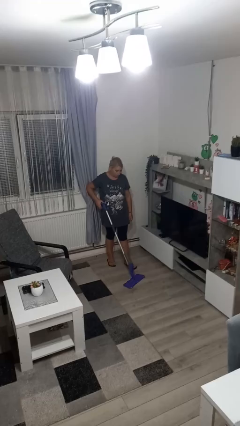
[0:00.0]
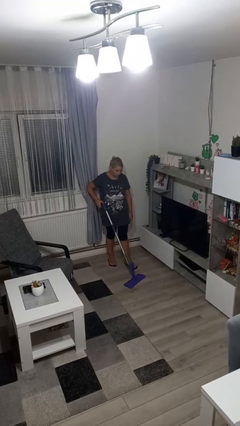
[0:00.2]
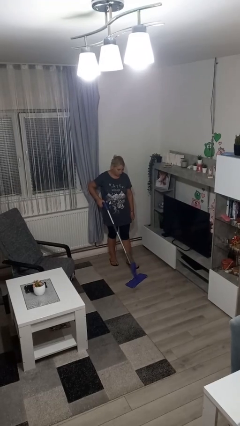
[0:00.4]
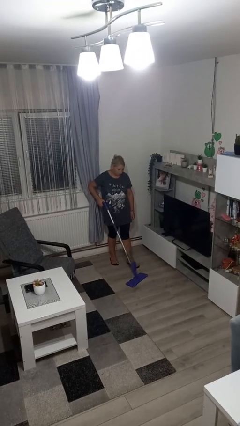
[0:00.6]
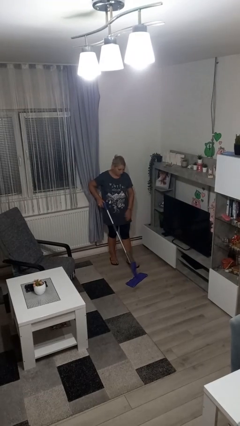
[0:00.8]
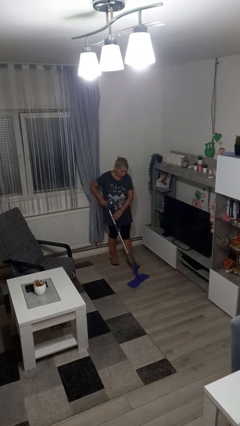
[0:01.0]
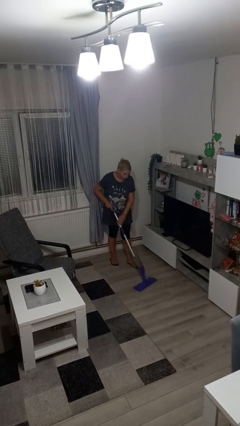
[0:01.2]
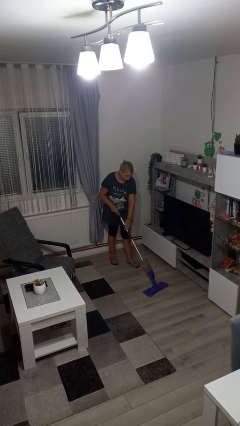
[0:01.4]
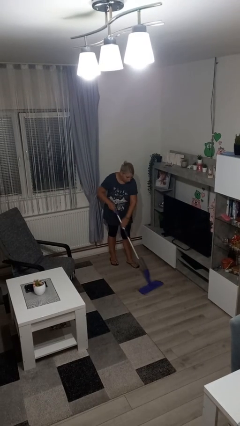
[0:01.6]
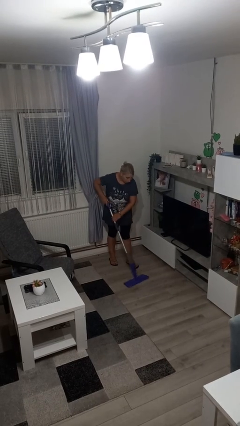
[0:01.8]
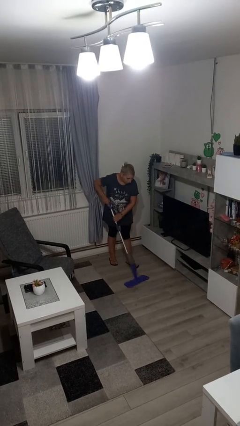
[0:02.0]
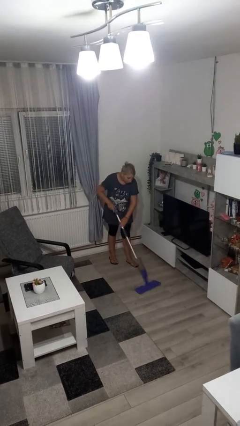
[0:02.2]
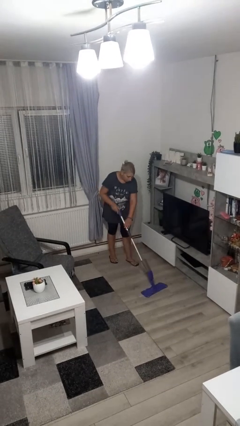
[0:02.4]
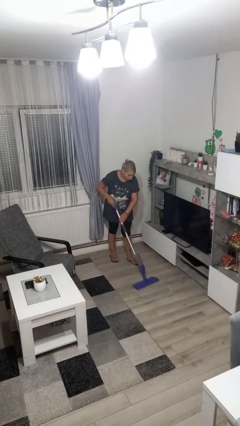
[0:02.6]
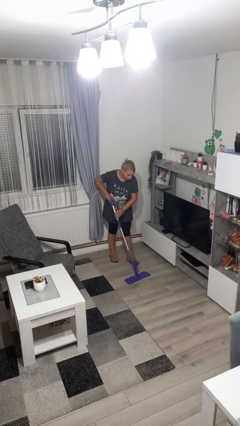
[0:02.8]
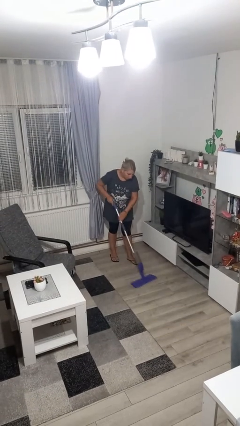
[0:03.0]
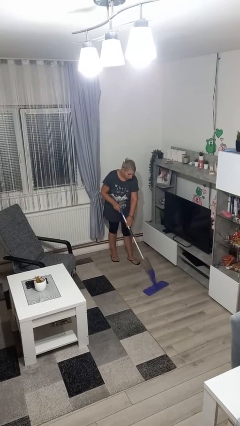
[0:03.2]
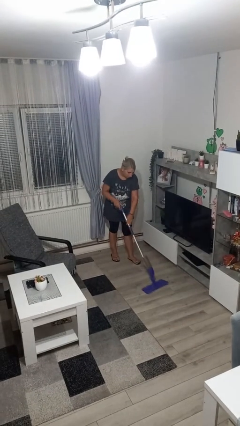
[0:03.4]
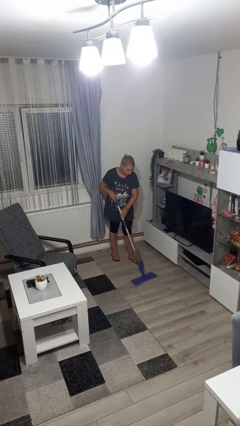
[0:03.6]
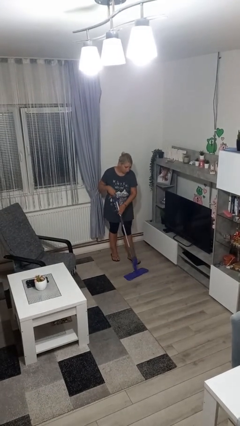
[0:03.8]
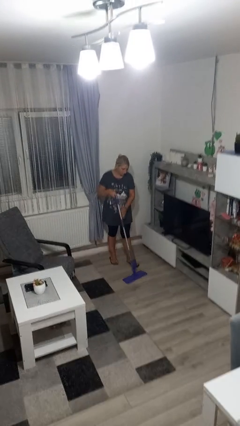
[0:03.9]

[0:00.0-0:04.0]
person mops

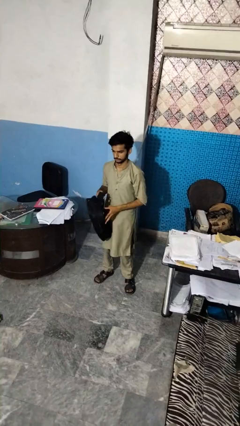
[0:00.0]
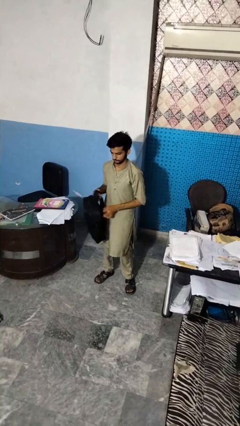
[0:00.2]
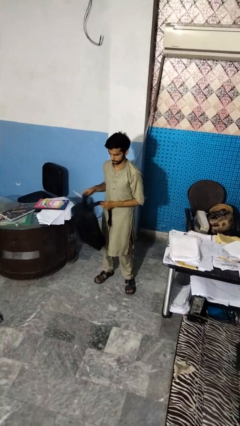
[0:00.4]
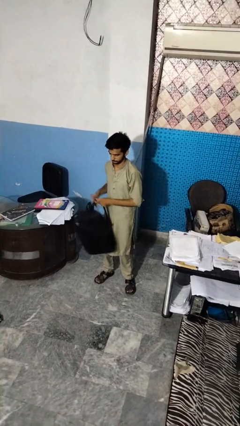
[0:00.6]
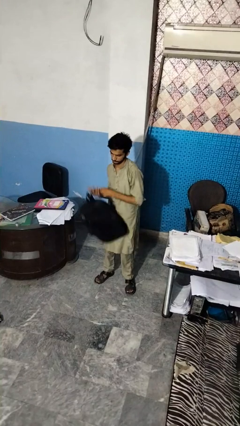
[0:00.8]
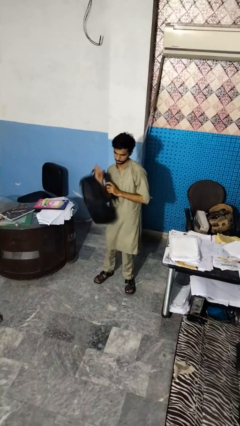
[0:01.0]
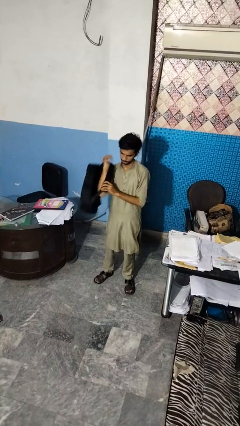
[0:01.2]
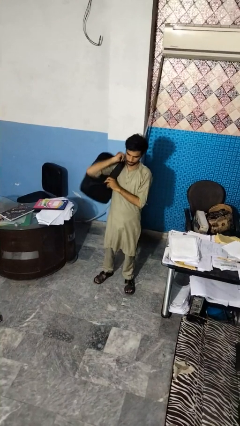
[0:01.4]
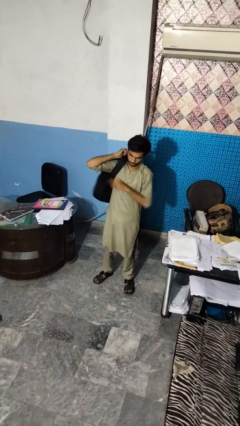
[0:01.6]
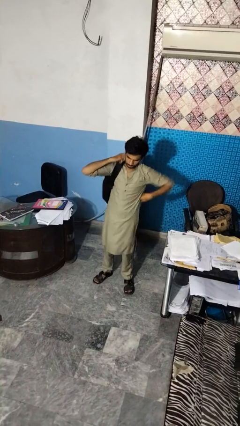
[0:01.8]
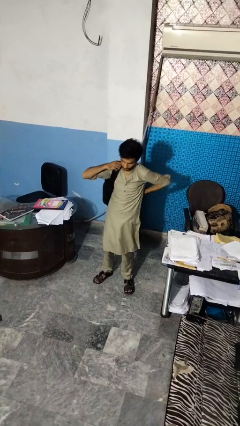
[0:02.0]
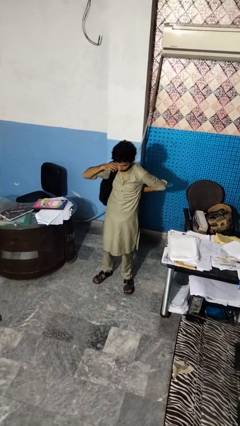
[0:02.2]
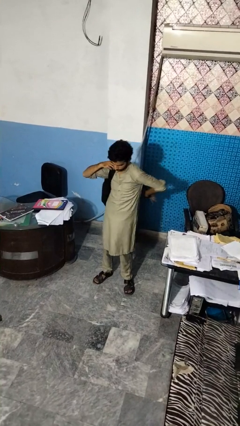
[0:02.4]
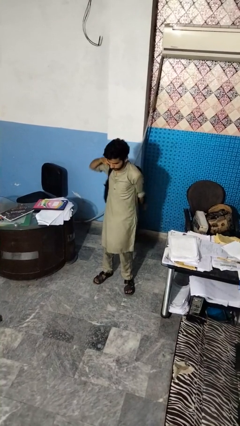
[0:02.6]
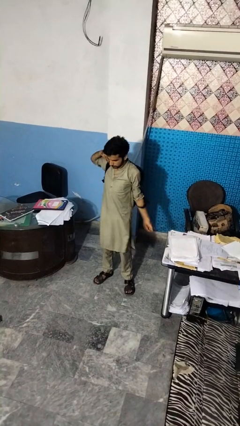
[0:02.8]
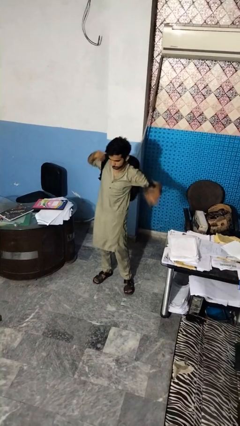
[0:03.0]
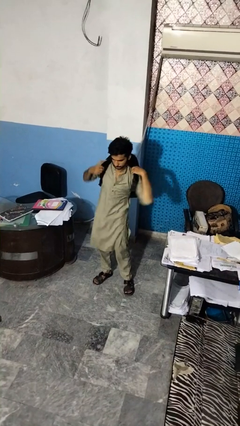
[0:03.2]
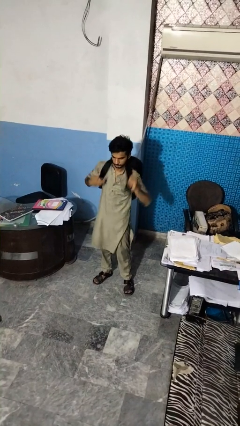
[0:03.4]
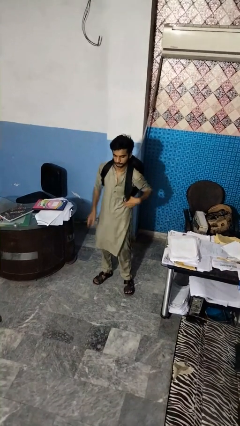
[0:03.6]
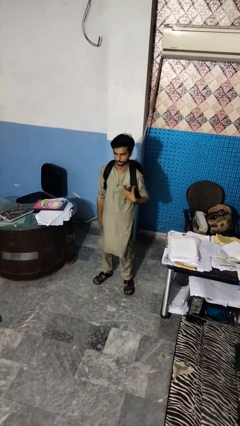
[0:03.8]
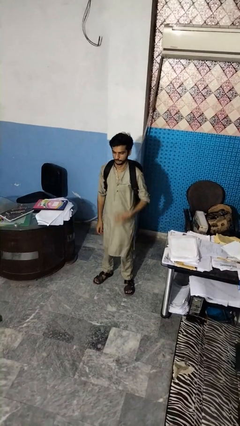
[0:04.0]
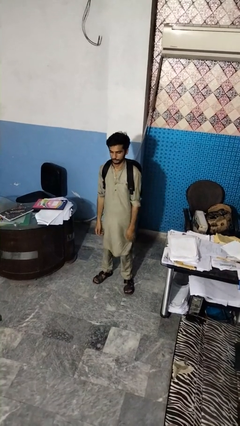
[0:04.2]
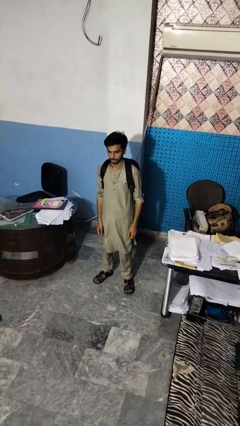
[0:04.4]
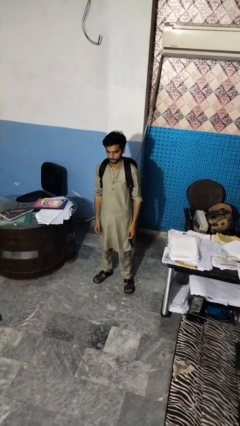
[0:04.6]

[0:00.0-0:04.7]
person puts on backpack

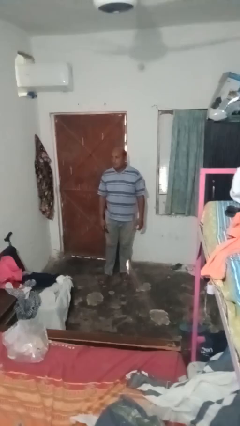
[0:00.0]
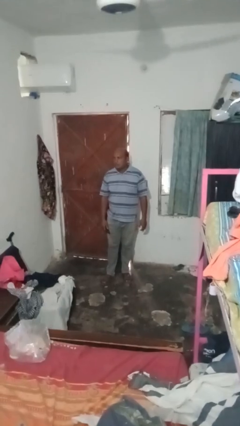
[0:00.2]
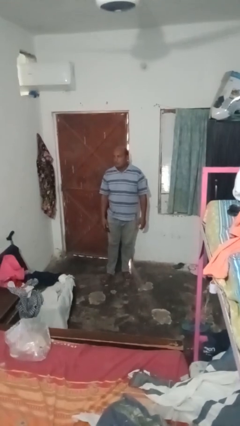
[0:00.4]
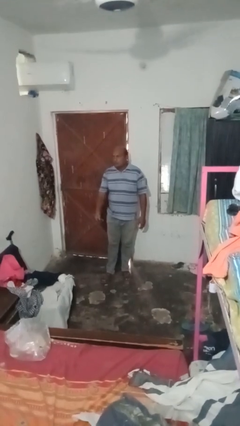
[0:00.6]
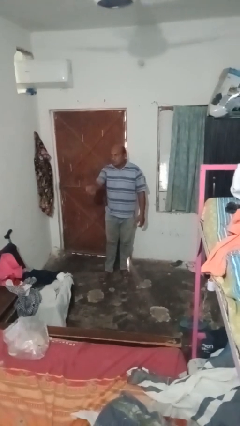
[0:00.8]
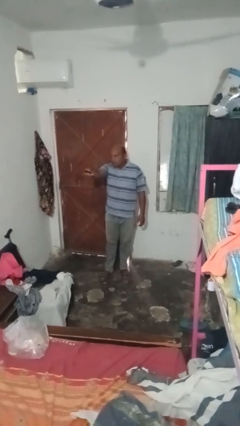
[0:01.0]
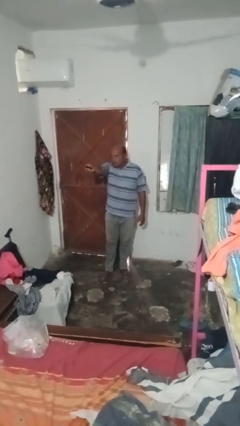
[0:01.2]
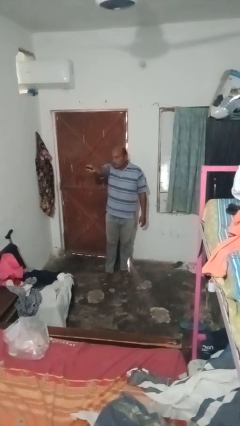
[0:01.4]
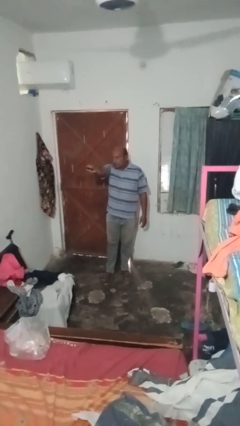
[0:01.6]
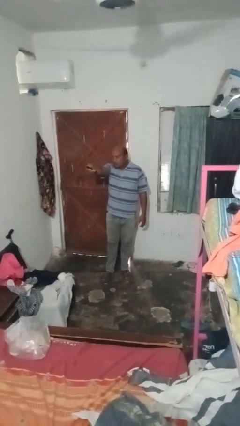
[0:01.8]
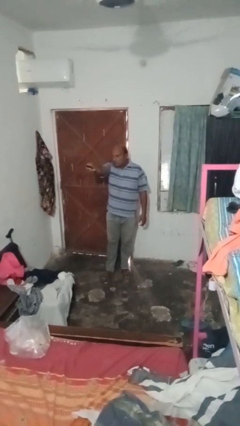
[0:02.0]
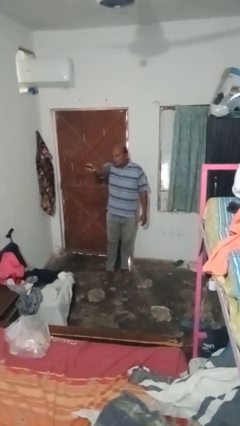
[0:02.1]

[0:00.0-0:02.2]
person uses television remote

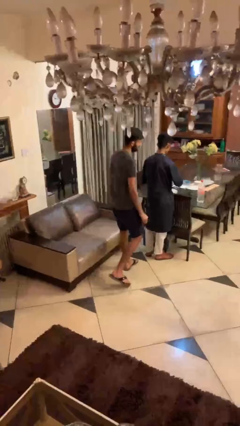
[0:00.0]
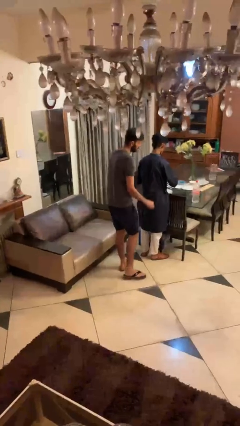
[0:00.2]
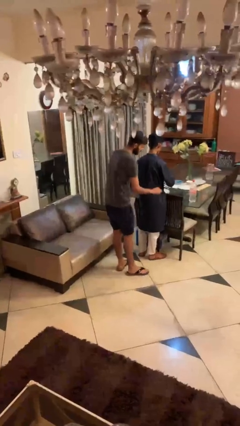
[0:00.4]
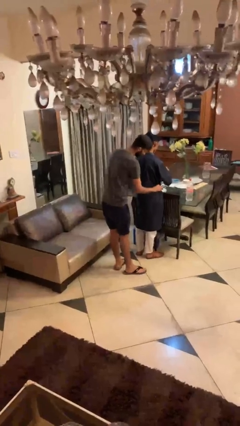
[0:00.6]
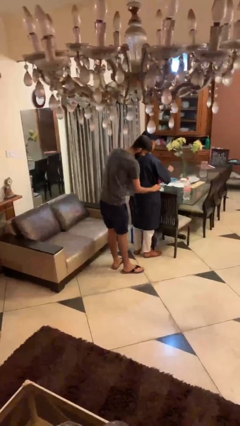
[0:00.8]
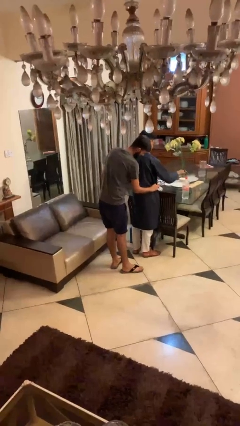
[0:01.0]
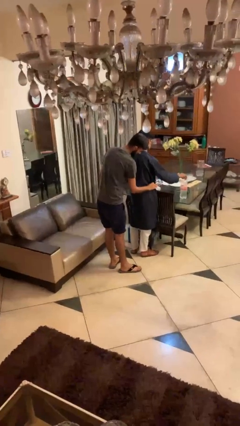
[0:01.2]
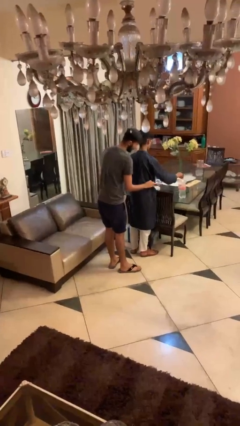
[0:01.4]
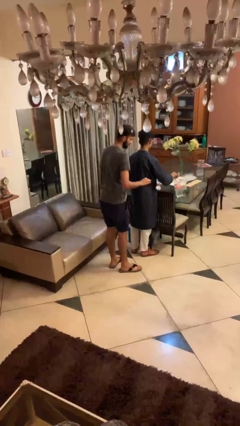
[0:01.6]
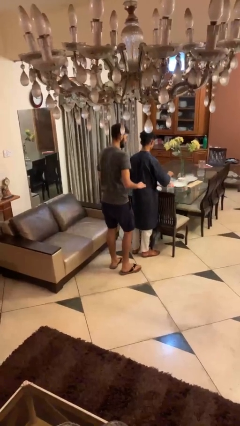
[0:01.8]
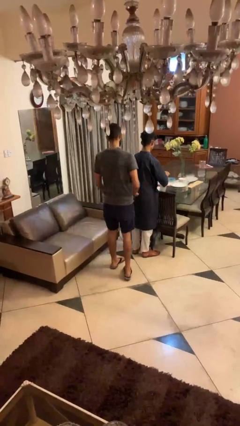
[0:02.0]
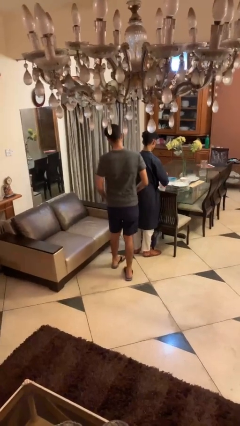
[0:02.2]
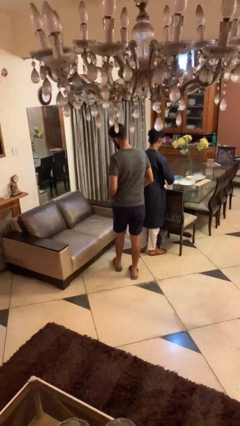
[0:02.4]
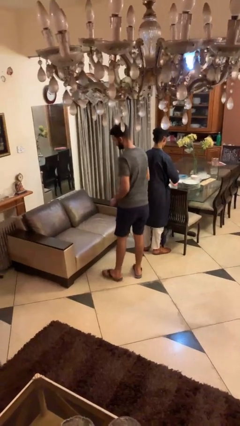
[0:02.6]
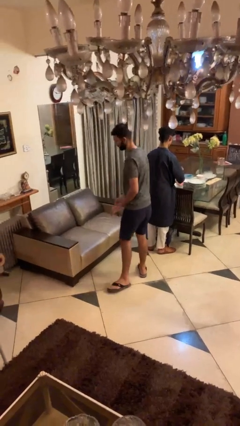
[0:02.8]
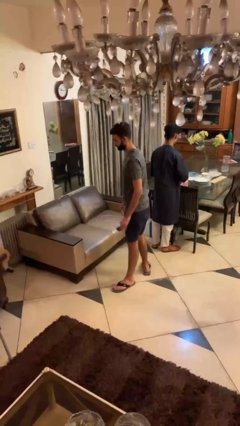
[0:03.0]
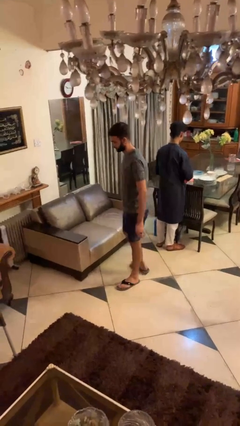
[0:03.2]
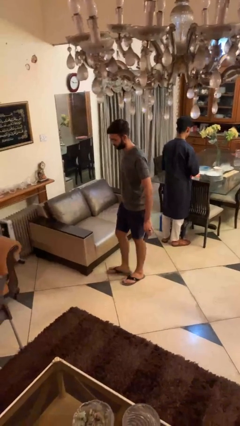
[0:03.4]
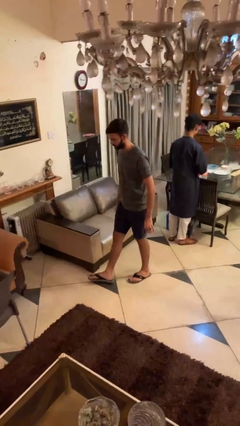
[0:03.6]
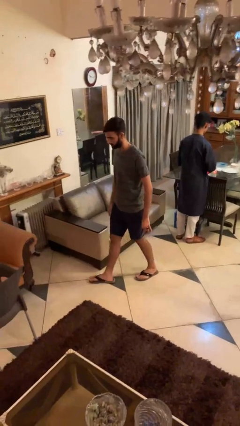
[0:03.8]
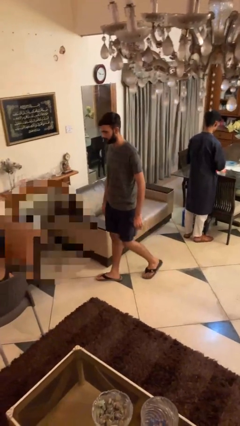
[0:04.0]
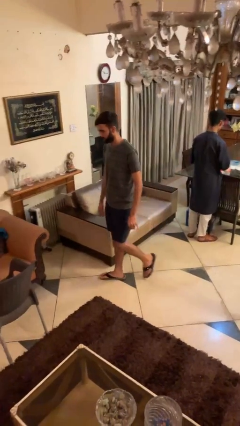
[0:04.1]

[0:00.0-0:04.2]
person steals object from person

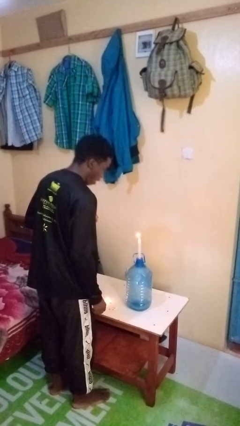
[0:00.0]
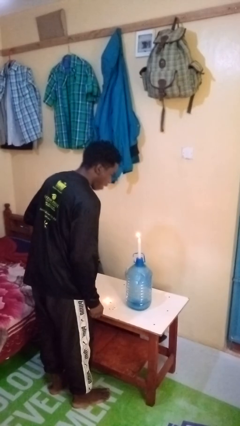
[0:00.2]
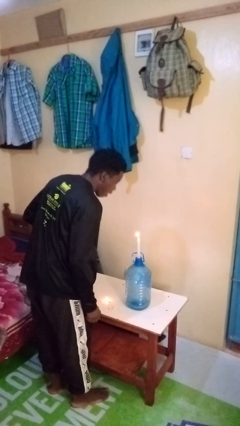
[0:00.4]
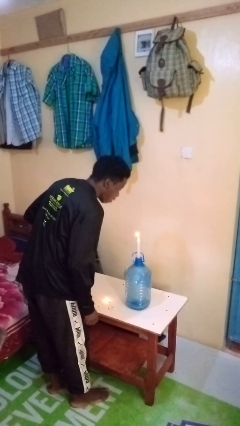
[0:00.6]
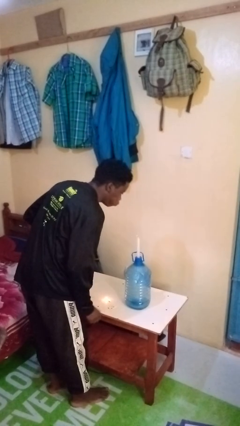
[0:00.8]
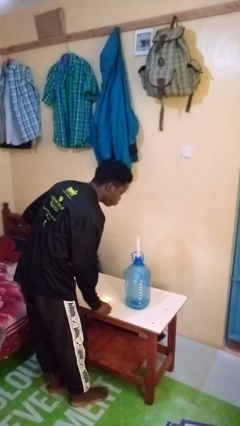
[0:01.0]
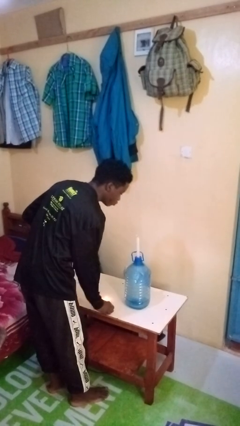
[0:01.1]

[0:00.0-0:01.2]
person extinguishes candle

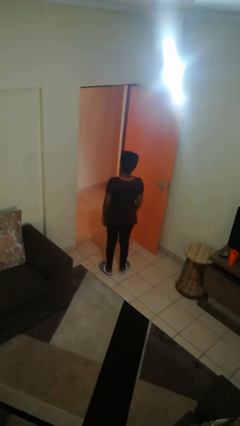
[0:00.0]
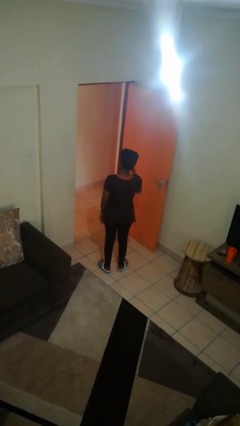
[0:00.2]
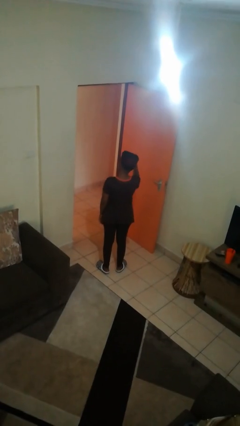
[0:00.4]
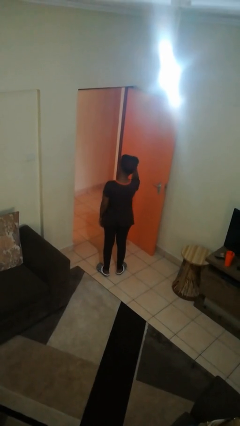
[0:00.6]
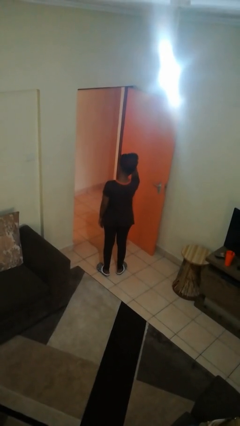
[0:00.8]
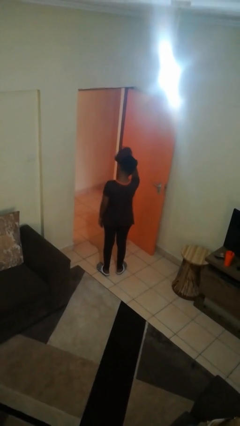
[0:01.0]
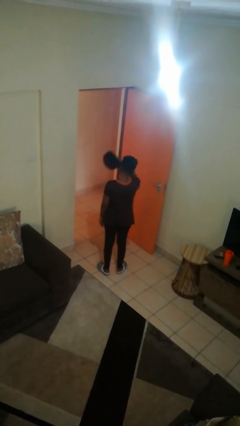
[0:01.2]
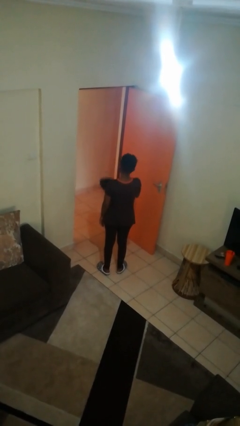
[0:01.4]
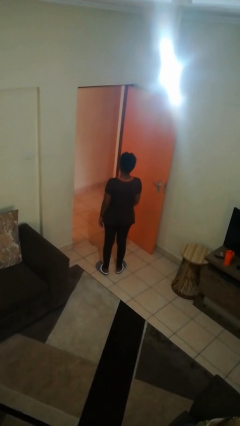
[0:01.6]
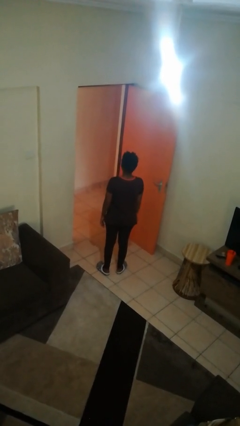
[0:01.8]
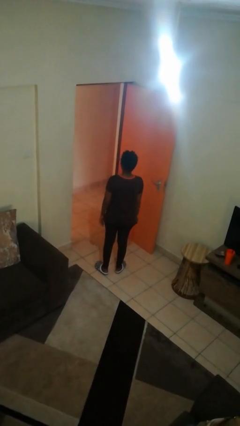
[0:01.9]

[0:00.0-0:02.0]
person takes off hat
